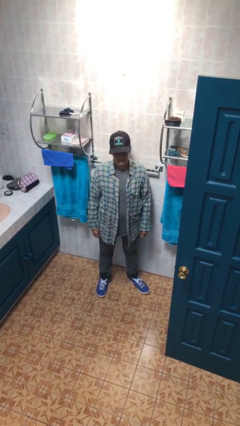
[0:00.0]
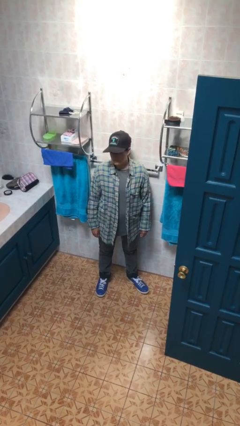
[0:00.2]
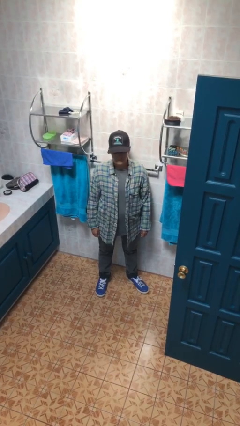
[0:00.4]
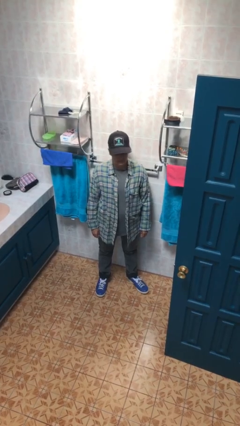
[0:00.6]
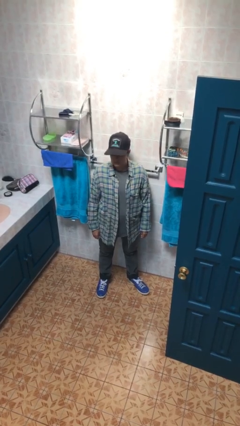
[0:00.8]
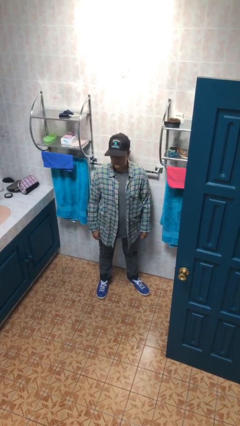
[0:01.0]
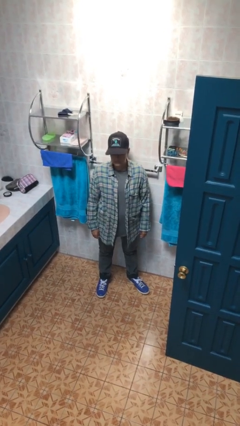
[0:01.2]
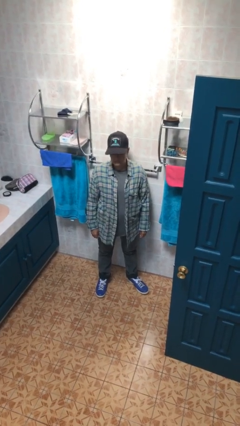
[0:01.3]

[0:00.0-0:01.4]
person shakes head

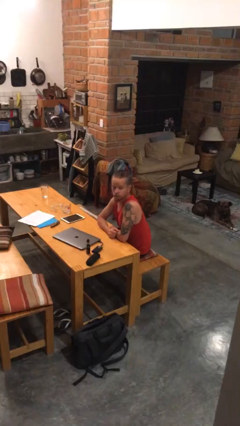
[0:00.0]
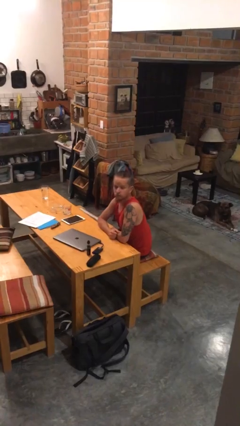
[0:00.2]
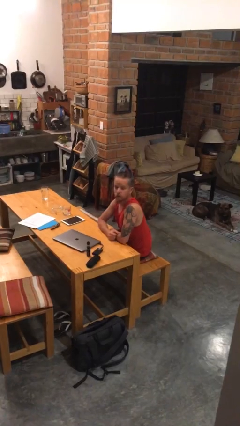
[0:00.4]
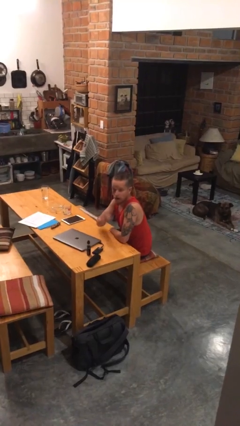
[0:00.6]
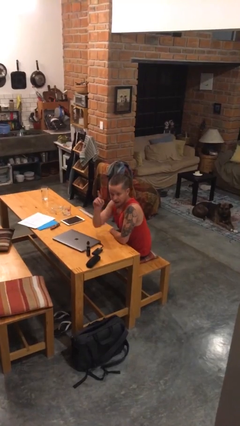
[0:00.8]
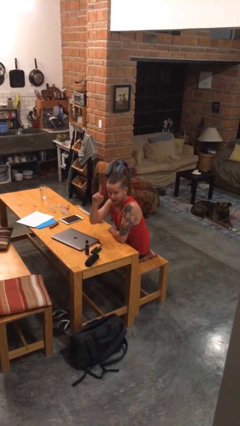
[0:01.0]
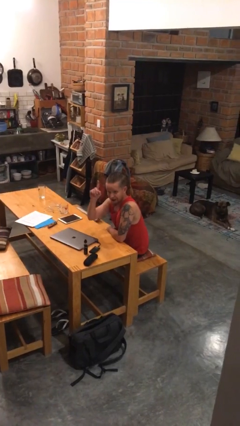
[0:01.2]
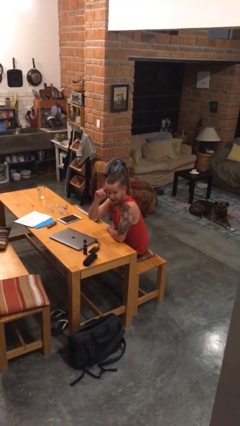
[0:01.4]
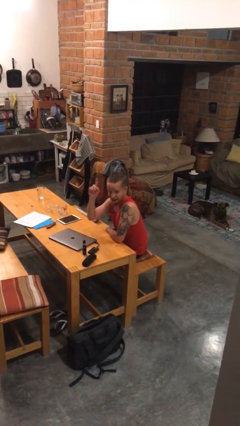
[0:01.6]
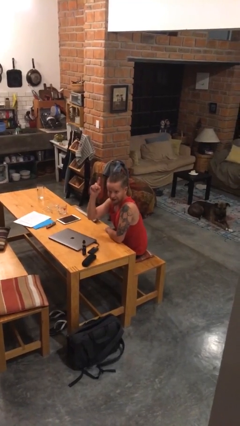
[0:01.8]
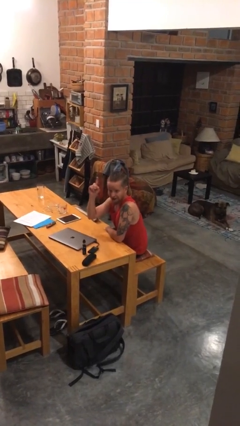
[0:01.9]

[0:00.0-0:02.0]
person gestures raise hand

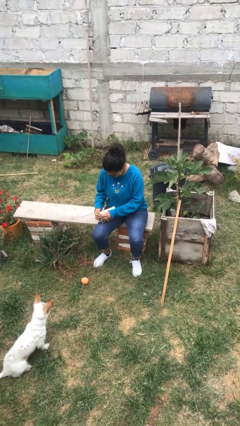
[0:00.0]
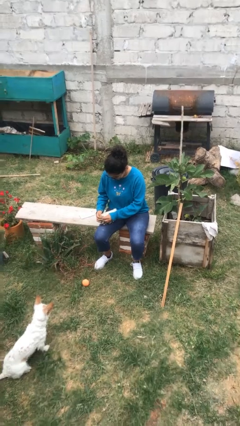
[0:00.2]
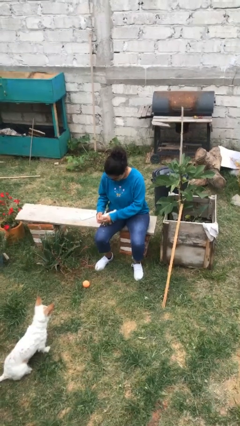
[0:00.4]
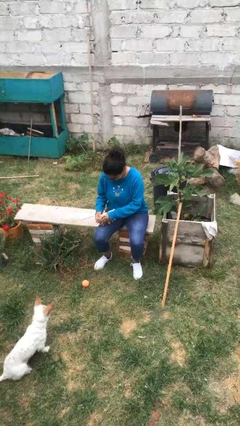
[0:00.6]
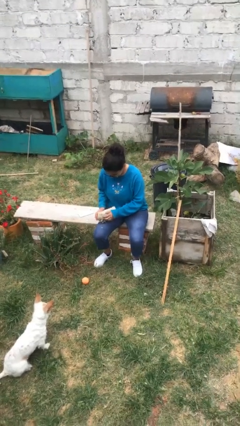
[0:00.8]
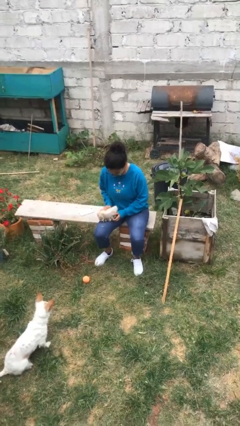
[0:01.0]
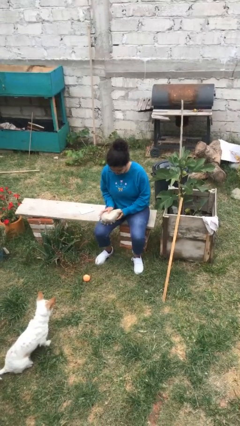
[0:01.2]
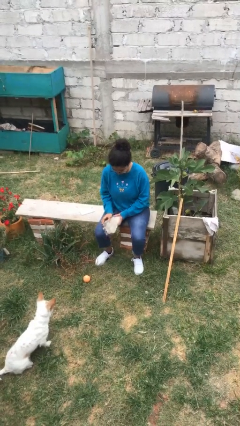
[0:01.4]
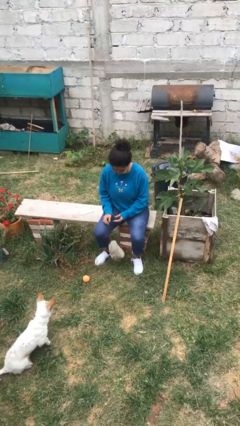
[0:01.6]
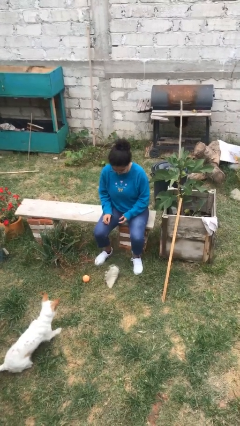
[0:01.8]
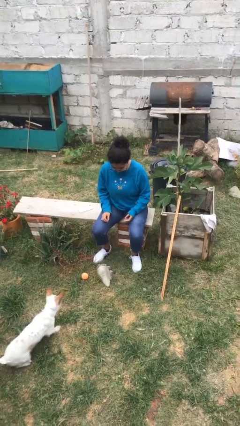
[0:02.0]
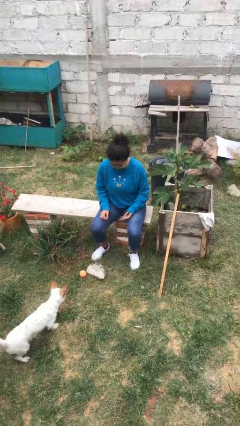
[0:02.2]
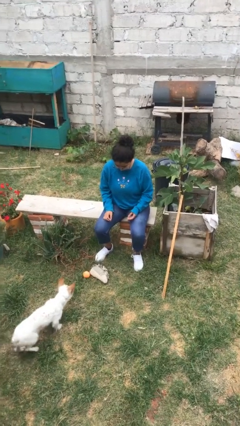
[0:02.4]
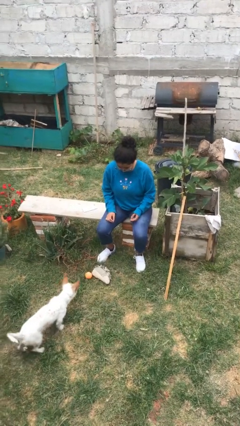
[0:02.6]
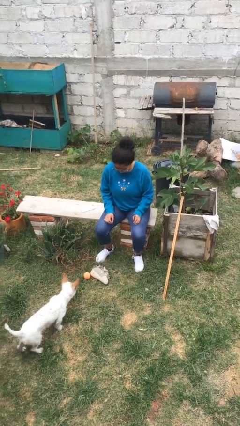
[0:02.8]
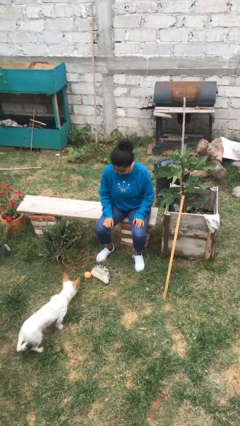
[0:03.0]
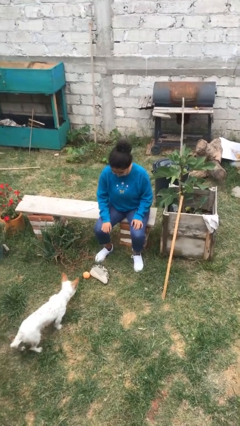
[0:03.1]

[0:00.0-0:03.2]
person drops object

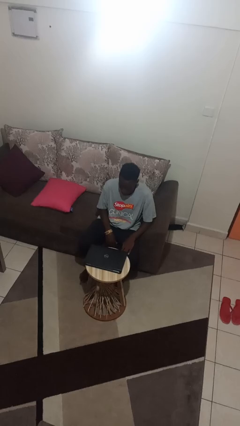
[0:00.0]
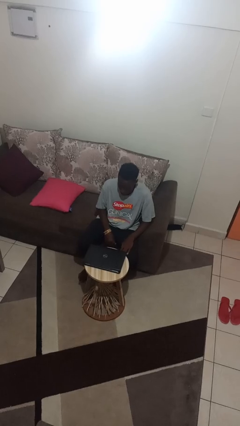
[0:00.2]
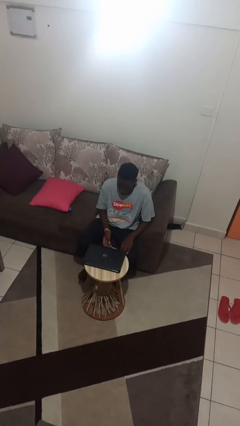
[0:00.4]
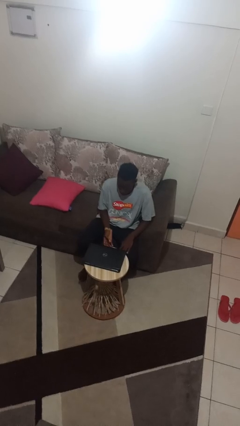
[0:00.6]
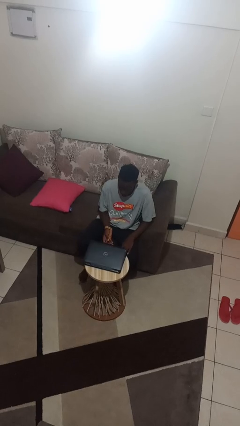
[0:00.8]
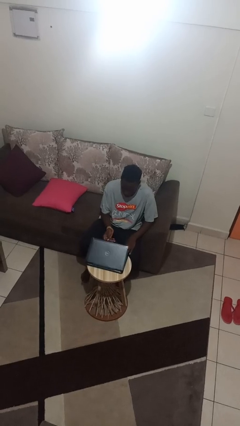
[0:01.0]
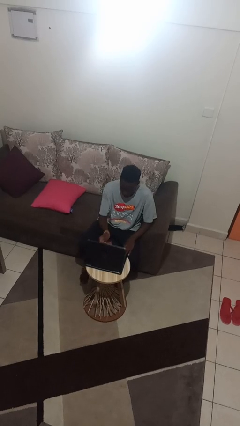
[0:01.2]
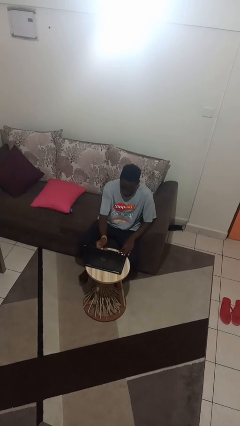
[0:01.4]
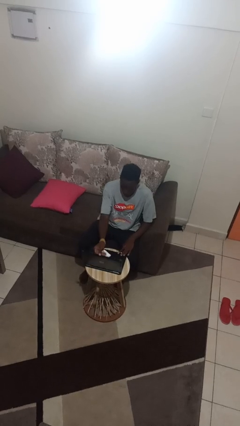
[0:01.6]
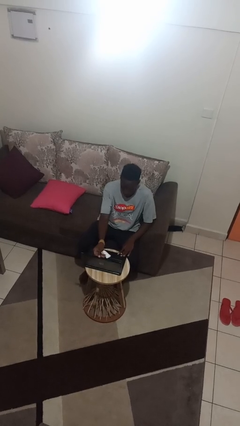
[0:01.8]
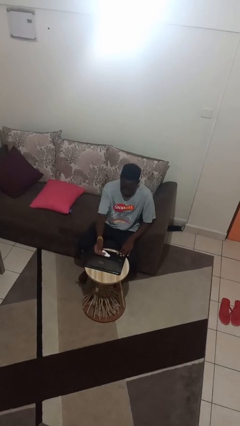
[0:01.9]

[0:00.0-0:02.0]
person opens laptop

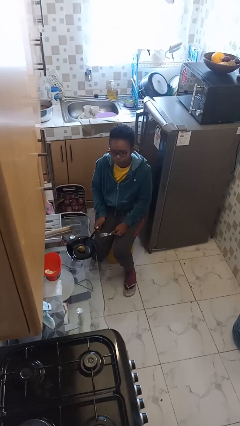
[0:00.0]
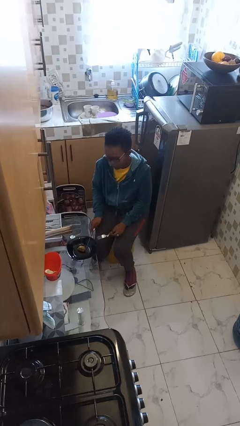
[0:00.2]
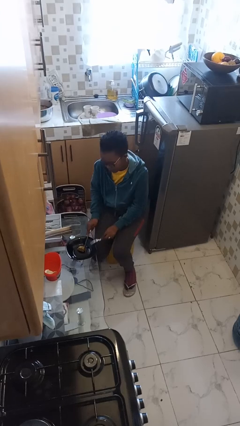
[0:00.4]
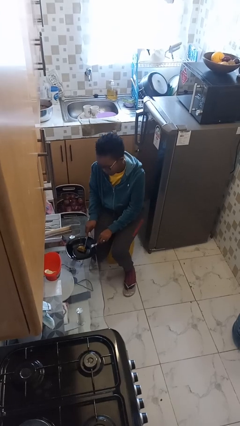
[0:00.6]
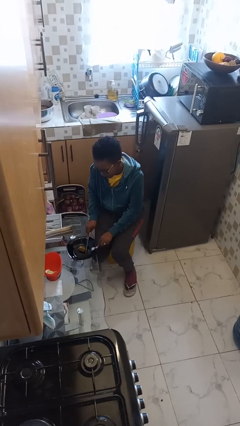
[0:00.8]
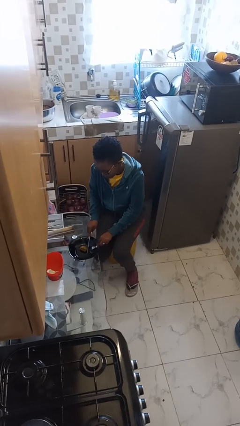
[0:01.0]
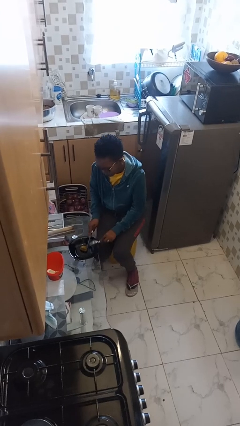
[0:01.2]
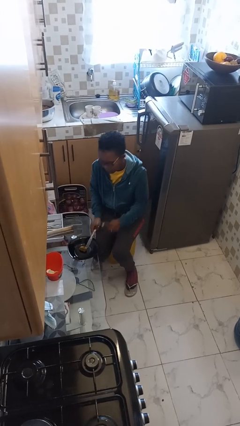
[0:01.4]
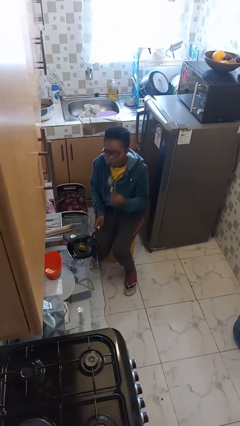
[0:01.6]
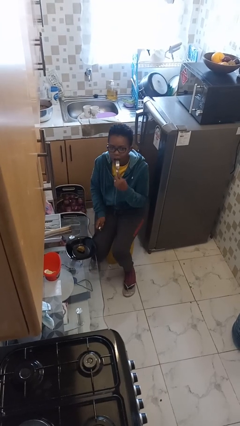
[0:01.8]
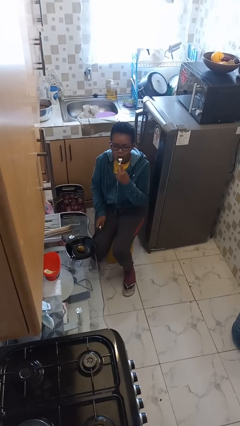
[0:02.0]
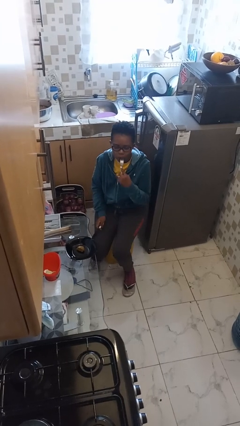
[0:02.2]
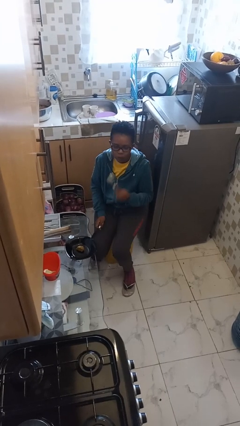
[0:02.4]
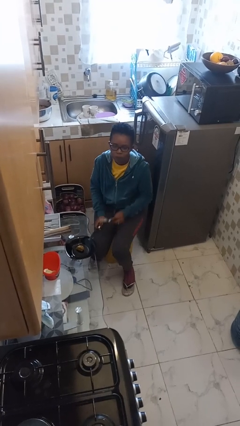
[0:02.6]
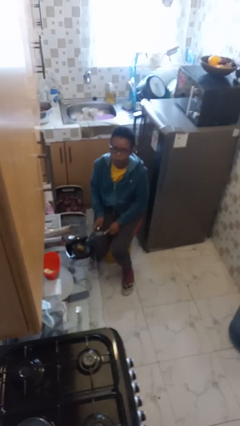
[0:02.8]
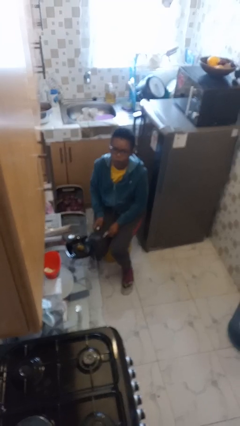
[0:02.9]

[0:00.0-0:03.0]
person eats with utensil

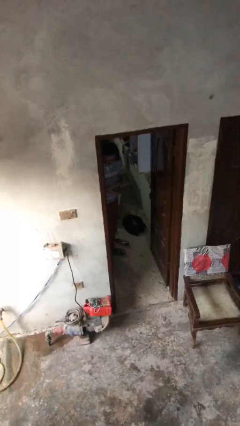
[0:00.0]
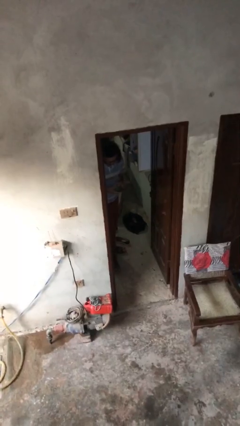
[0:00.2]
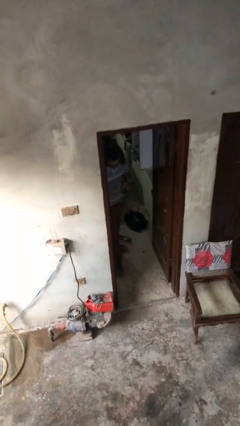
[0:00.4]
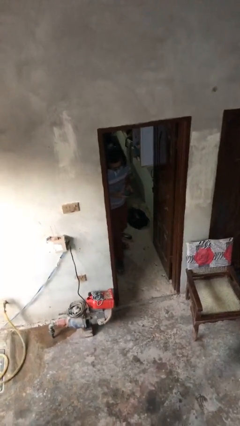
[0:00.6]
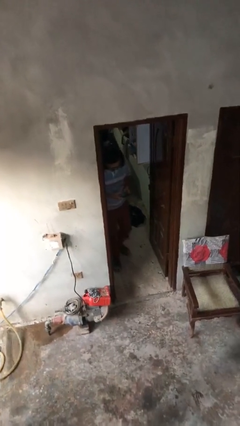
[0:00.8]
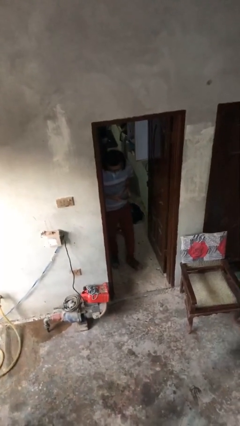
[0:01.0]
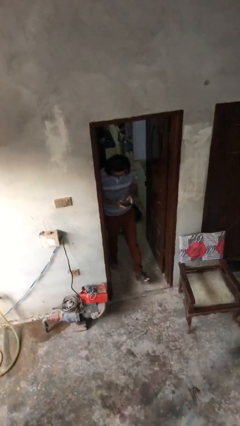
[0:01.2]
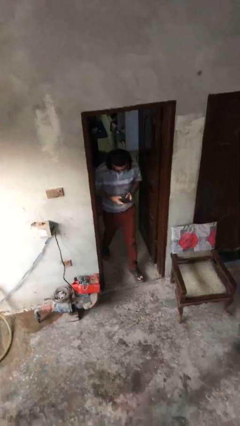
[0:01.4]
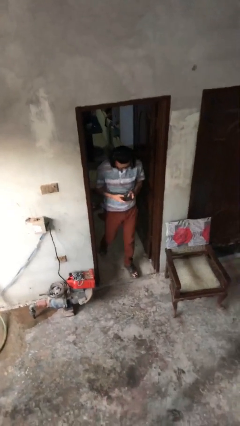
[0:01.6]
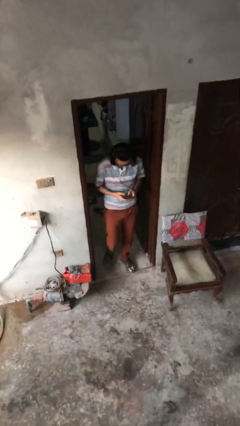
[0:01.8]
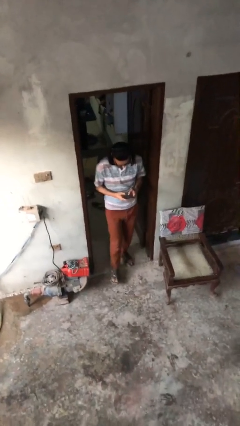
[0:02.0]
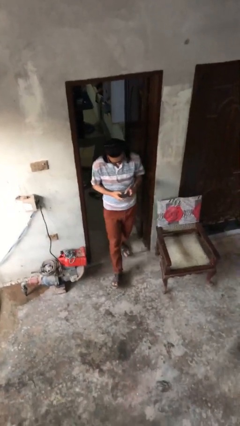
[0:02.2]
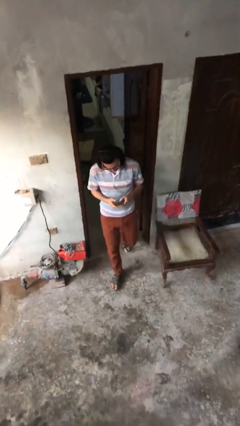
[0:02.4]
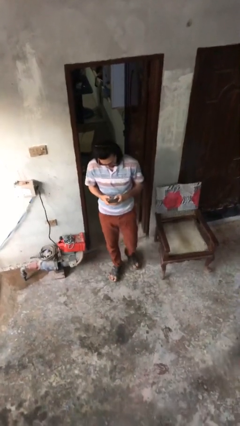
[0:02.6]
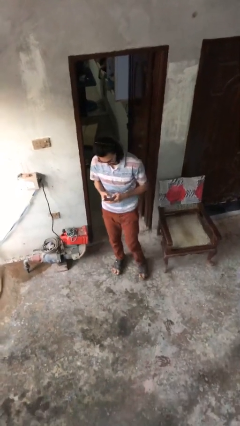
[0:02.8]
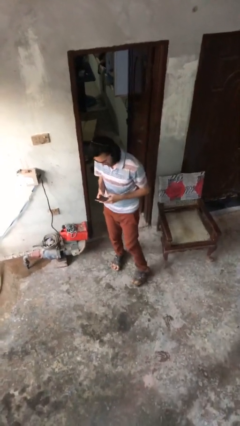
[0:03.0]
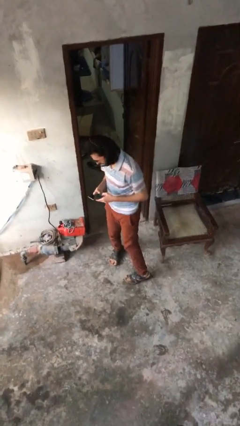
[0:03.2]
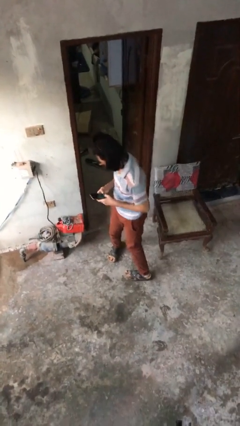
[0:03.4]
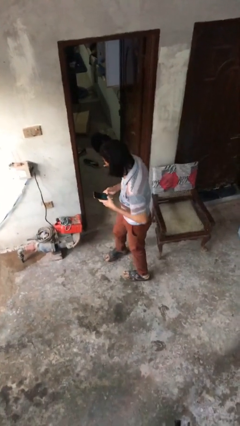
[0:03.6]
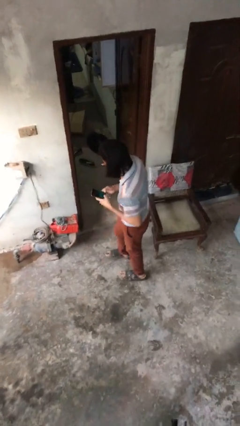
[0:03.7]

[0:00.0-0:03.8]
person exits scene through structure

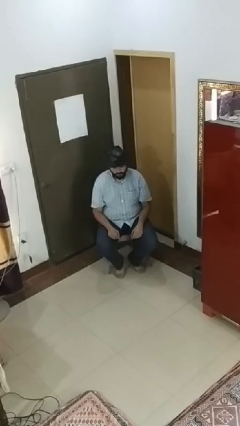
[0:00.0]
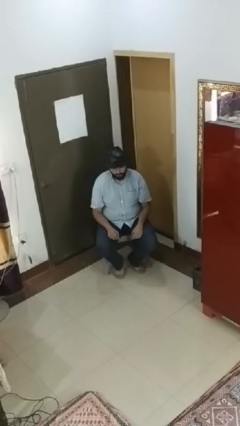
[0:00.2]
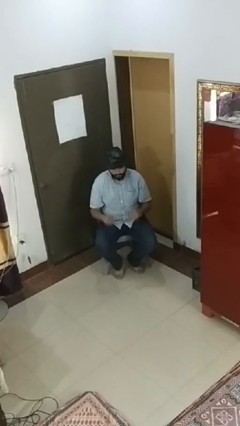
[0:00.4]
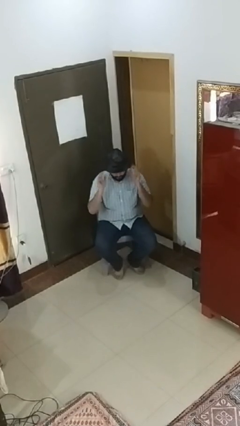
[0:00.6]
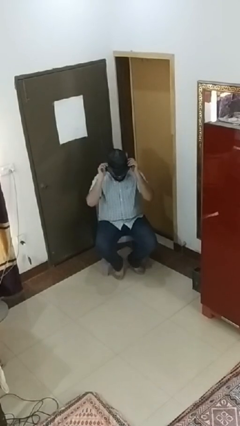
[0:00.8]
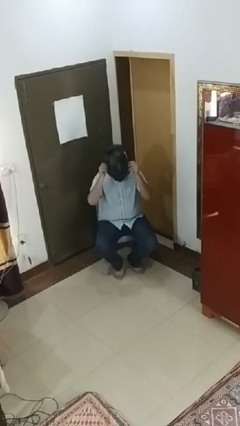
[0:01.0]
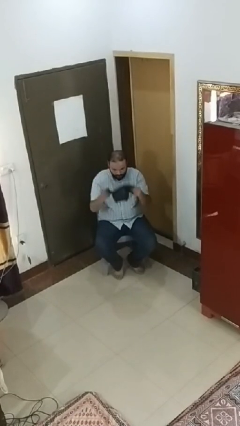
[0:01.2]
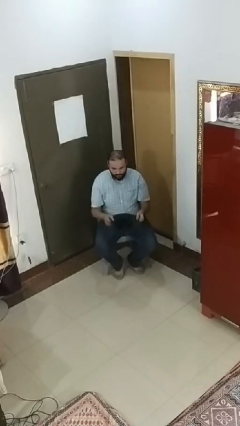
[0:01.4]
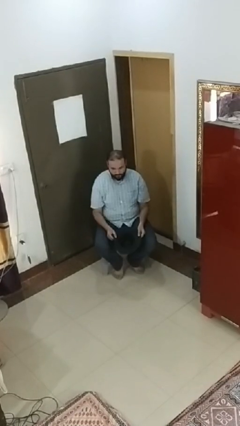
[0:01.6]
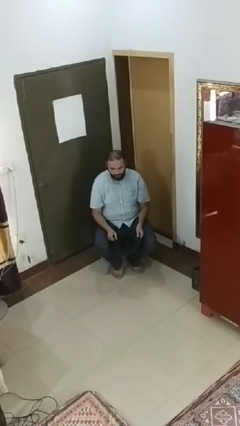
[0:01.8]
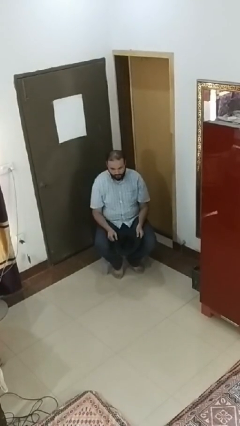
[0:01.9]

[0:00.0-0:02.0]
person takes off hat
